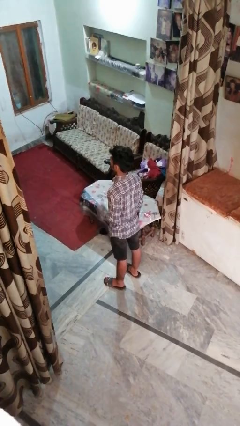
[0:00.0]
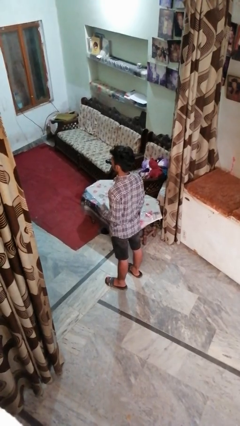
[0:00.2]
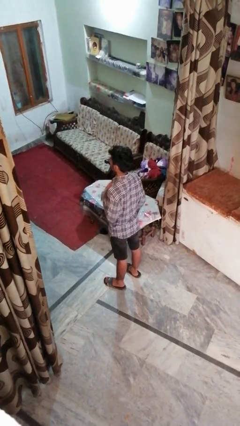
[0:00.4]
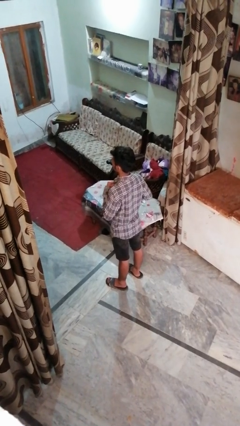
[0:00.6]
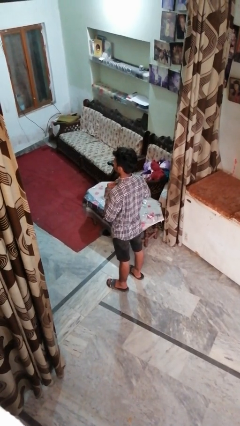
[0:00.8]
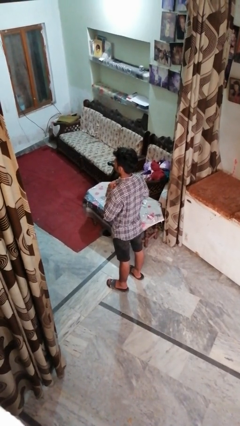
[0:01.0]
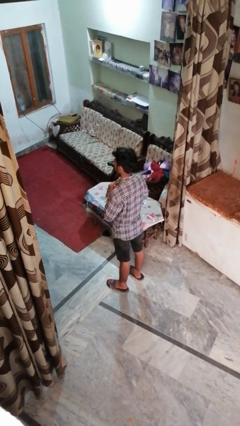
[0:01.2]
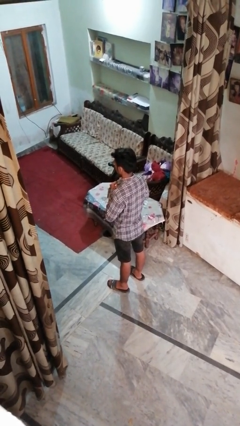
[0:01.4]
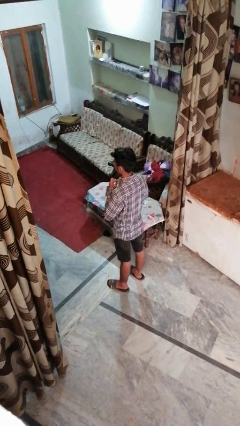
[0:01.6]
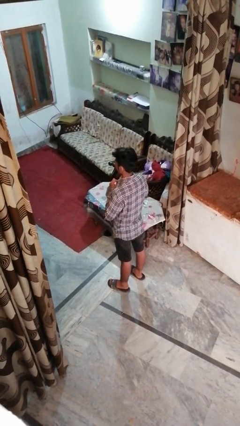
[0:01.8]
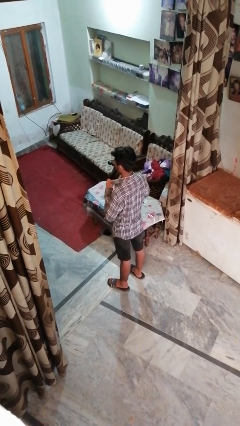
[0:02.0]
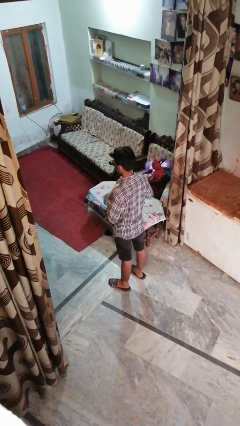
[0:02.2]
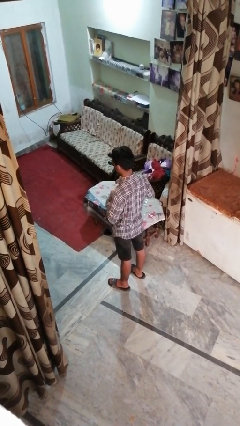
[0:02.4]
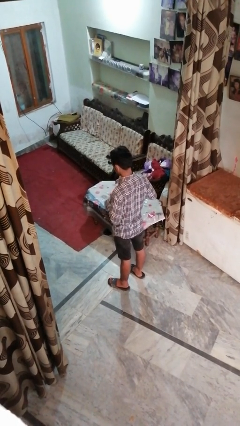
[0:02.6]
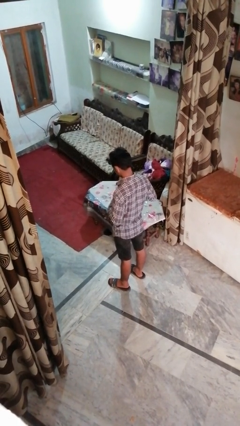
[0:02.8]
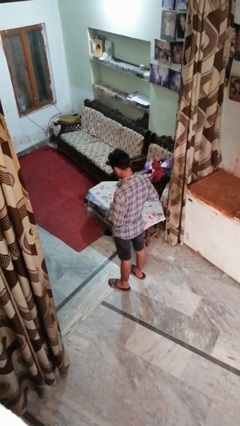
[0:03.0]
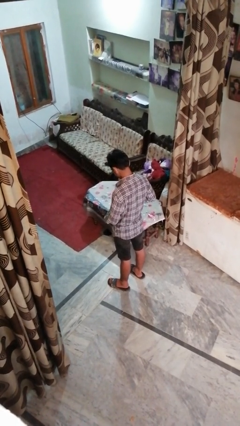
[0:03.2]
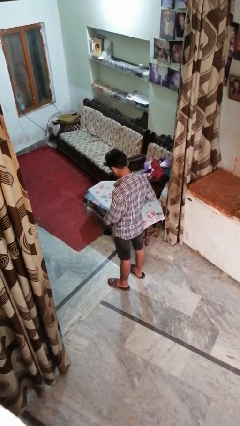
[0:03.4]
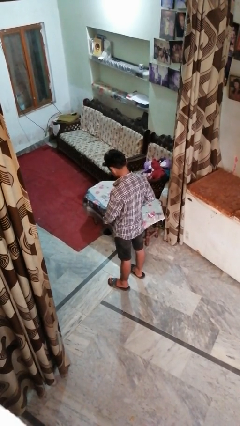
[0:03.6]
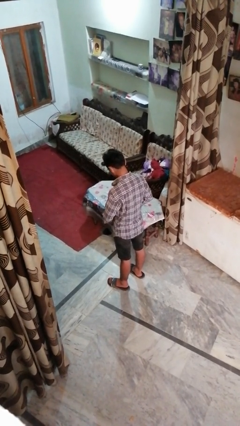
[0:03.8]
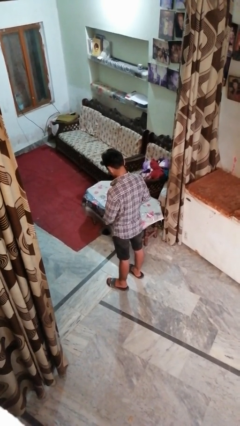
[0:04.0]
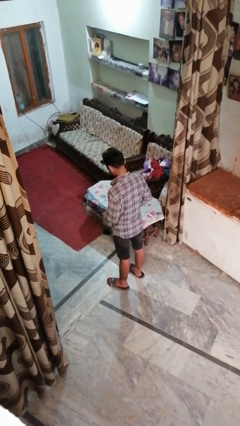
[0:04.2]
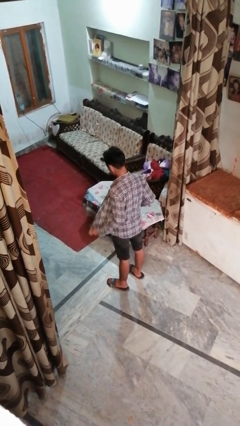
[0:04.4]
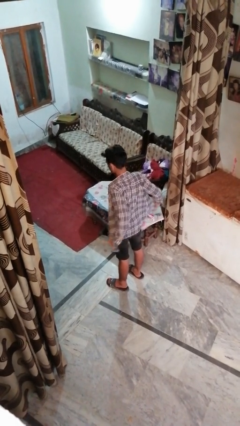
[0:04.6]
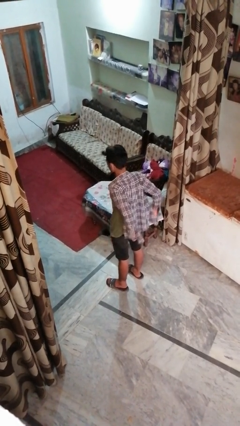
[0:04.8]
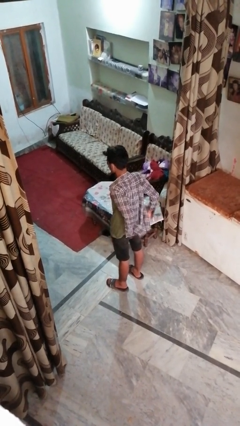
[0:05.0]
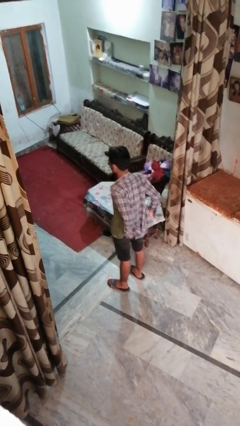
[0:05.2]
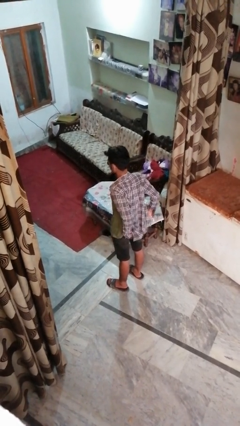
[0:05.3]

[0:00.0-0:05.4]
person unbuttons shirt

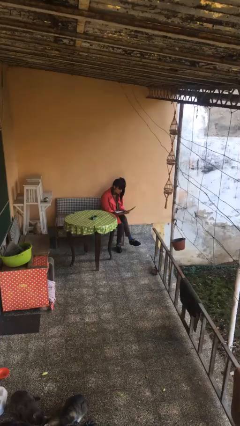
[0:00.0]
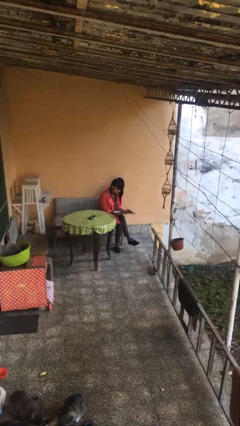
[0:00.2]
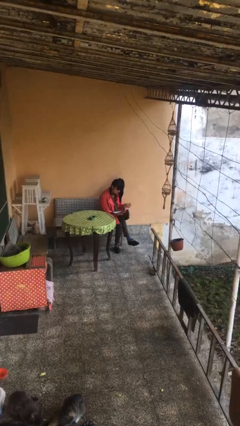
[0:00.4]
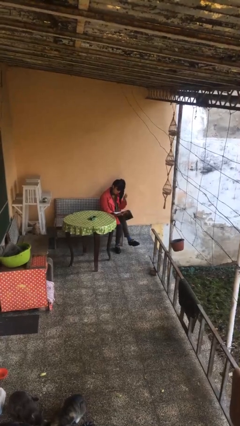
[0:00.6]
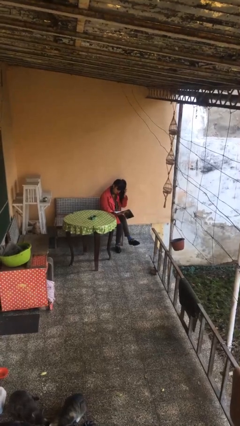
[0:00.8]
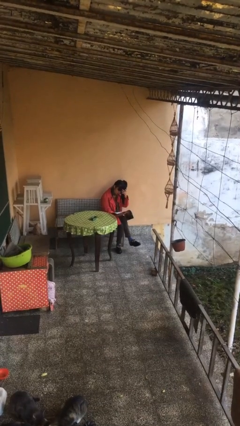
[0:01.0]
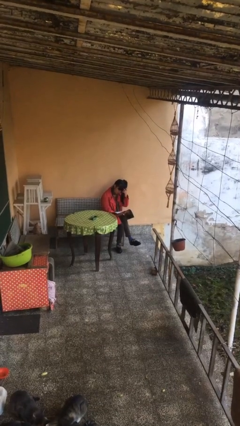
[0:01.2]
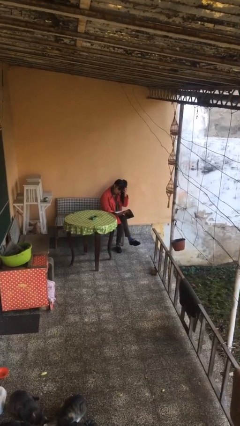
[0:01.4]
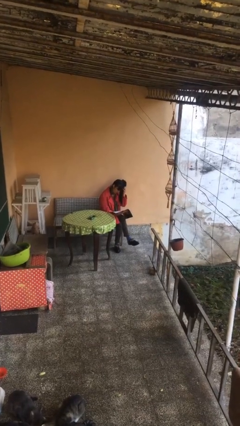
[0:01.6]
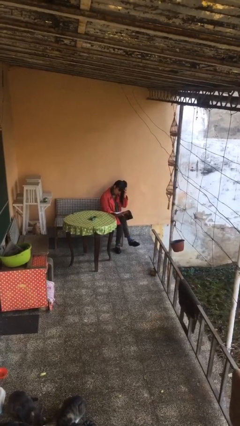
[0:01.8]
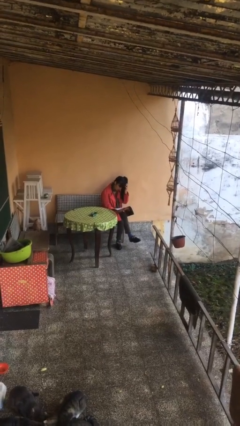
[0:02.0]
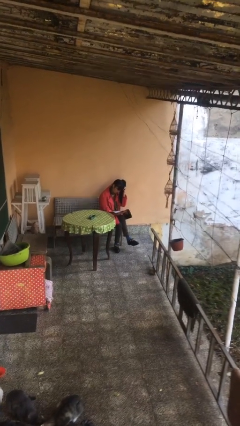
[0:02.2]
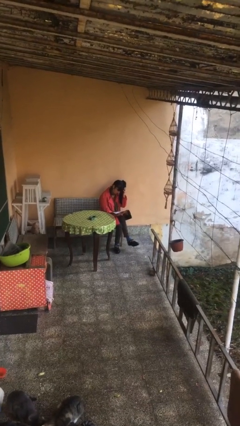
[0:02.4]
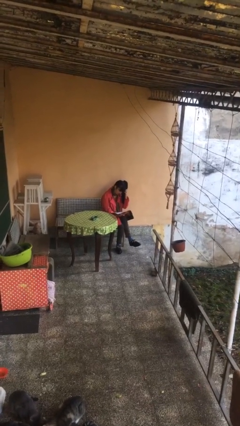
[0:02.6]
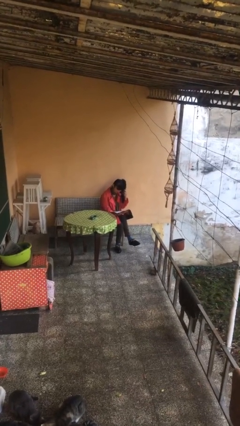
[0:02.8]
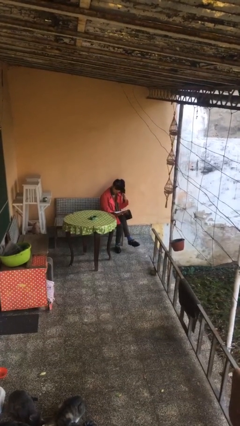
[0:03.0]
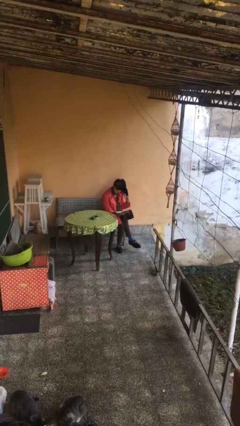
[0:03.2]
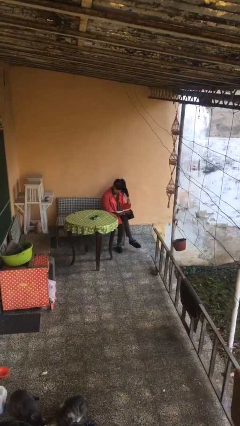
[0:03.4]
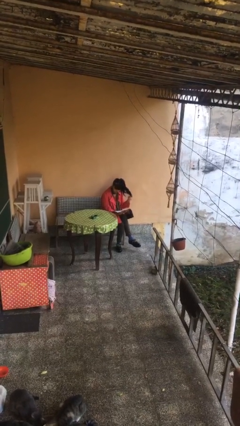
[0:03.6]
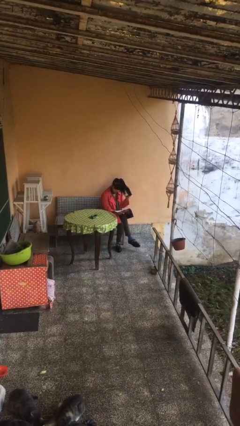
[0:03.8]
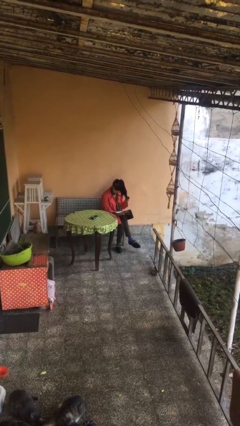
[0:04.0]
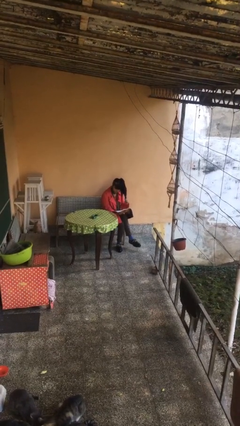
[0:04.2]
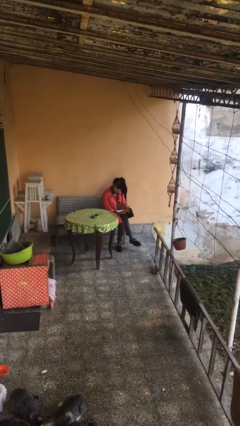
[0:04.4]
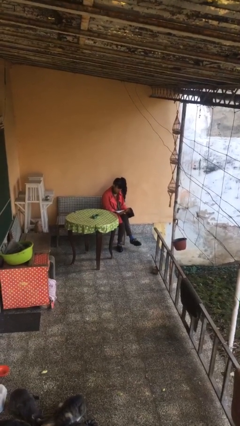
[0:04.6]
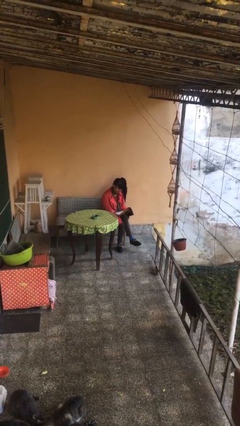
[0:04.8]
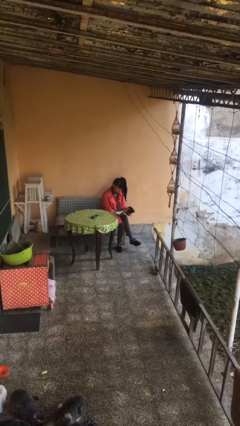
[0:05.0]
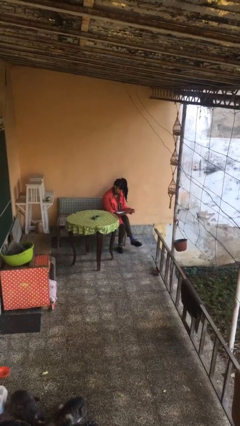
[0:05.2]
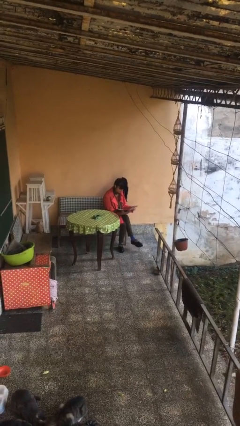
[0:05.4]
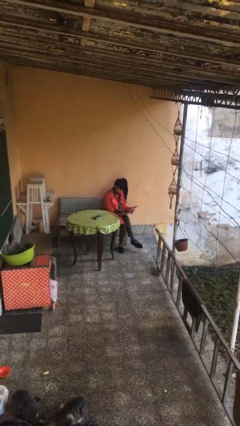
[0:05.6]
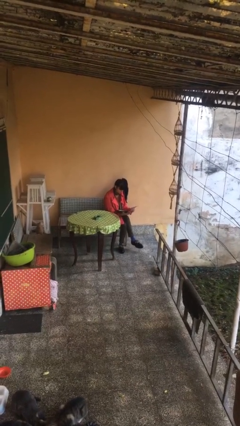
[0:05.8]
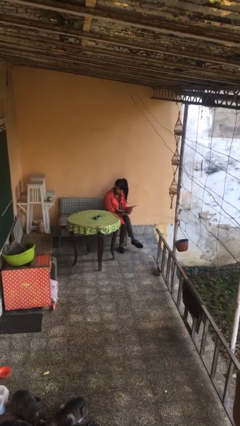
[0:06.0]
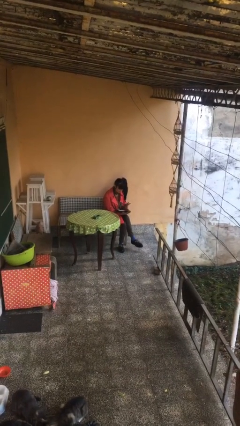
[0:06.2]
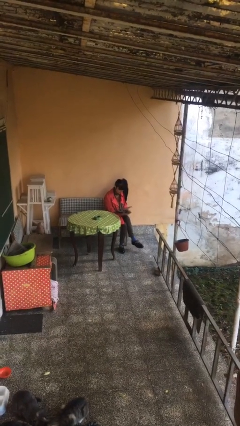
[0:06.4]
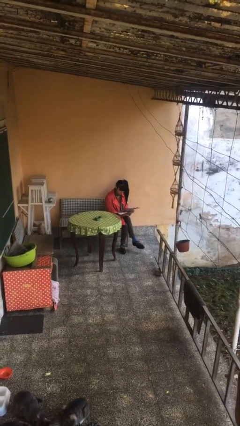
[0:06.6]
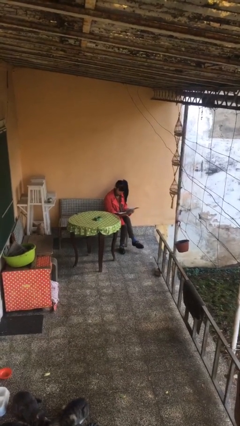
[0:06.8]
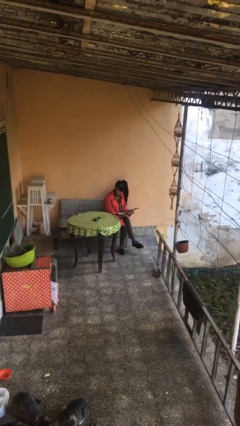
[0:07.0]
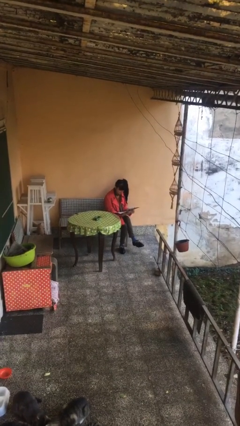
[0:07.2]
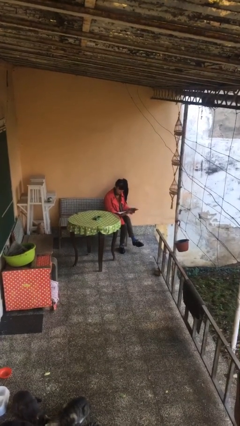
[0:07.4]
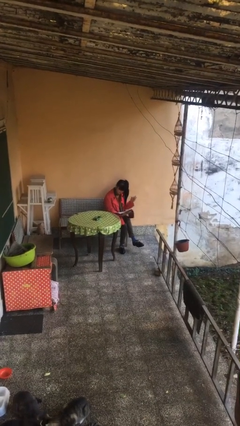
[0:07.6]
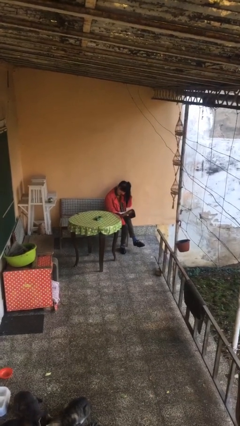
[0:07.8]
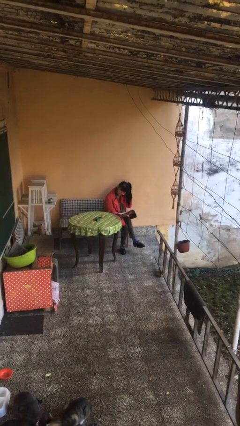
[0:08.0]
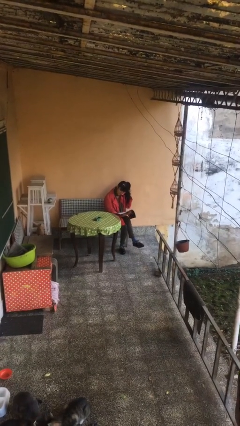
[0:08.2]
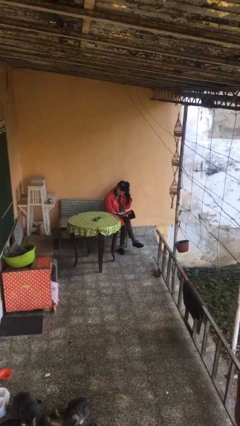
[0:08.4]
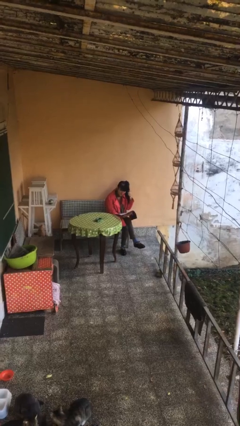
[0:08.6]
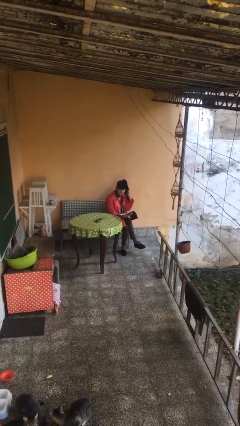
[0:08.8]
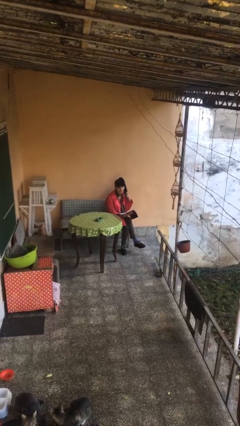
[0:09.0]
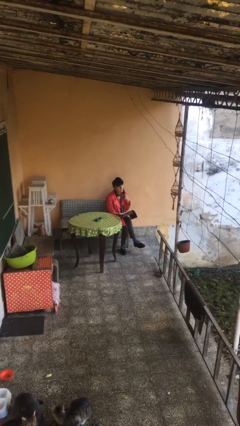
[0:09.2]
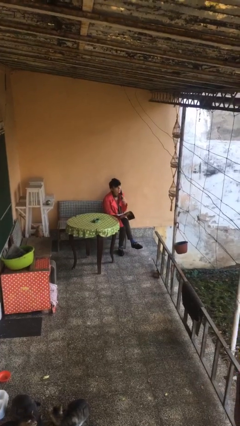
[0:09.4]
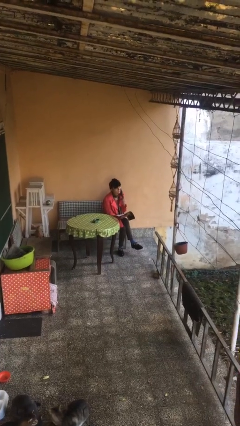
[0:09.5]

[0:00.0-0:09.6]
person reads document

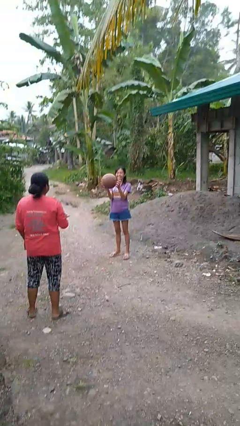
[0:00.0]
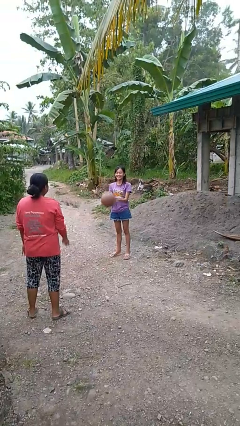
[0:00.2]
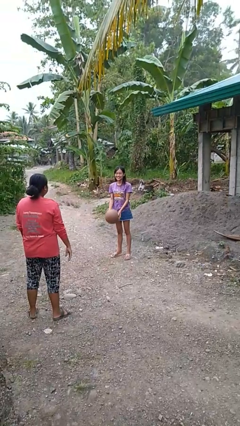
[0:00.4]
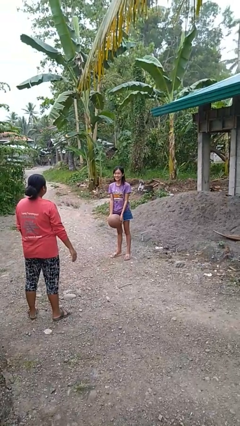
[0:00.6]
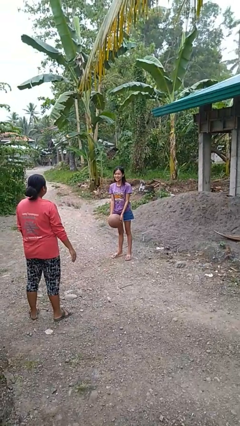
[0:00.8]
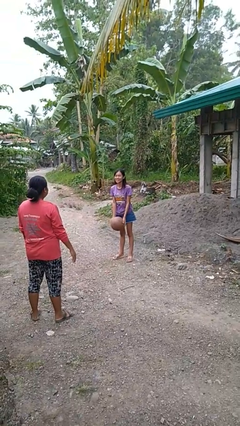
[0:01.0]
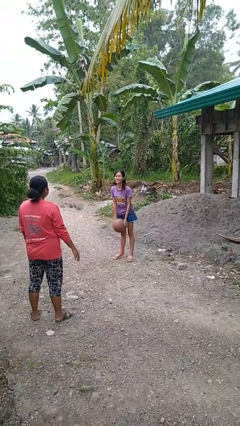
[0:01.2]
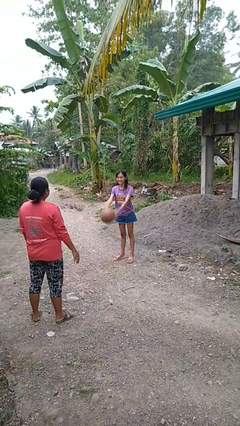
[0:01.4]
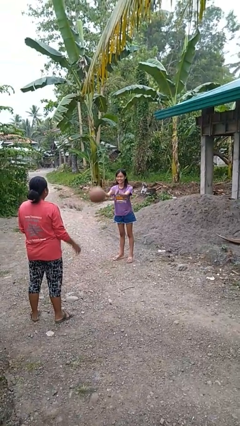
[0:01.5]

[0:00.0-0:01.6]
person catches object from person

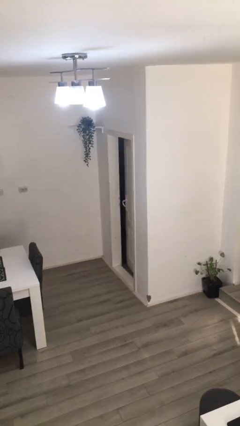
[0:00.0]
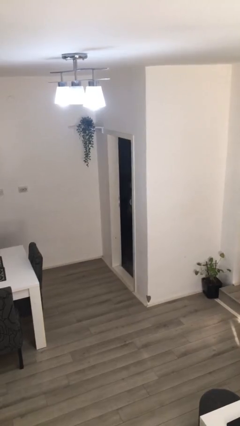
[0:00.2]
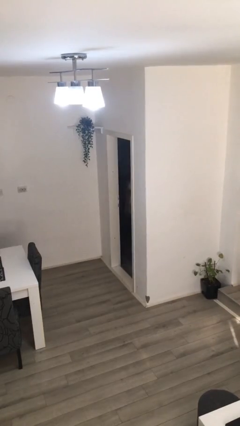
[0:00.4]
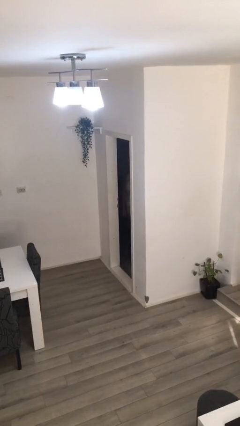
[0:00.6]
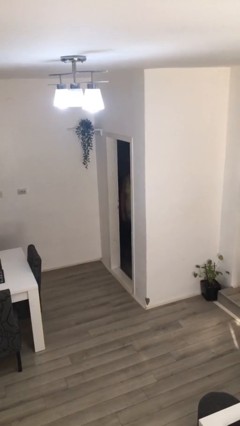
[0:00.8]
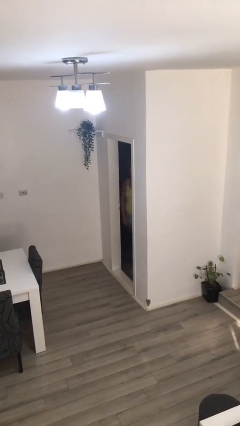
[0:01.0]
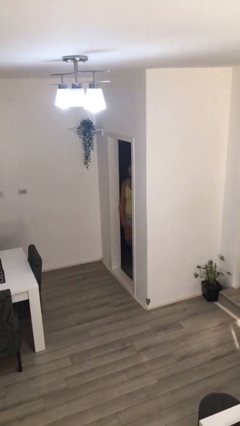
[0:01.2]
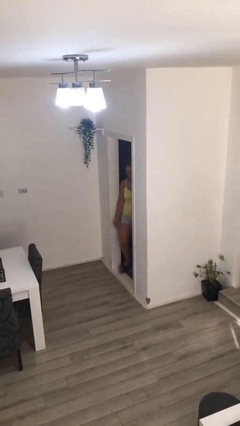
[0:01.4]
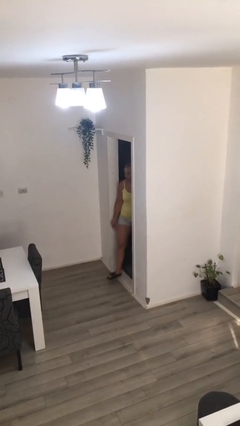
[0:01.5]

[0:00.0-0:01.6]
person opens facility door
